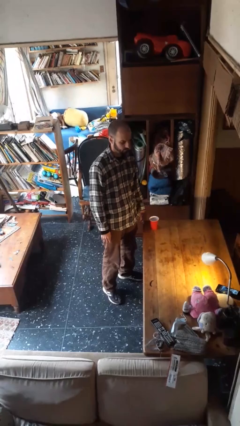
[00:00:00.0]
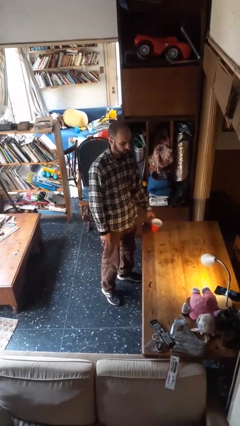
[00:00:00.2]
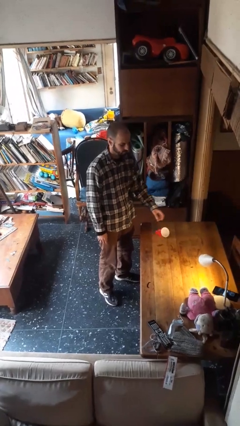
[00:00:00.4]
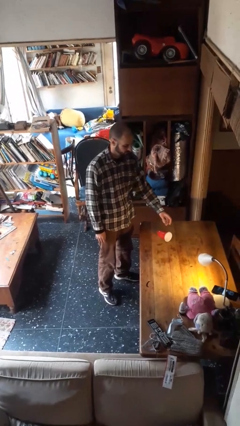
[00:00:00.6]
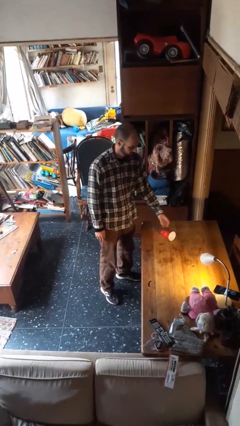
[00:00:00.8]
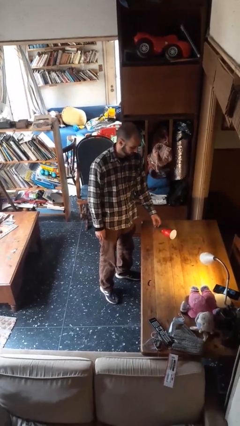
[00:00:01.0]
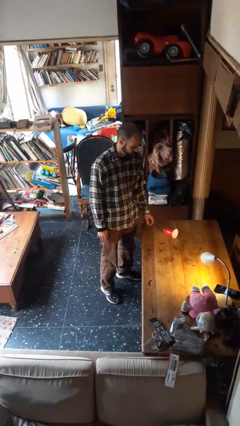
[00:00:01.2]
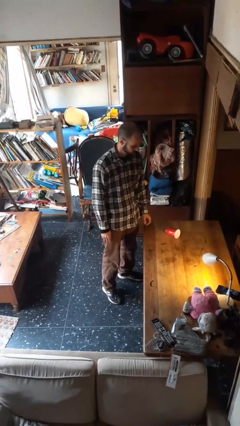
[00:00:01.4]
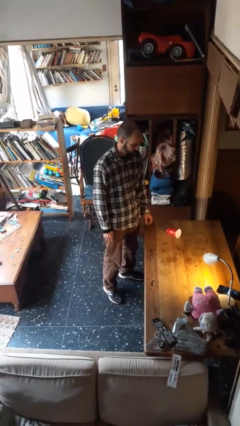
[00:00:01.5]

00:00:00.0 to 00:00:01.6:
person knocks over glass

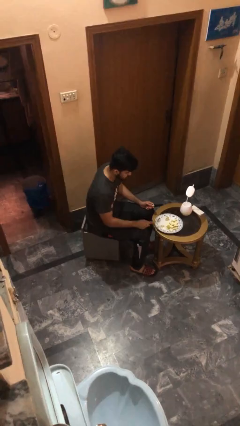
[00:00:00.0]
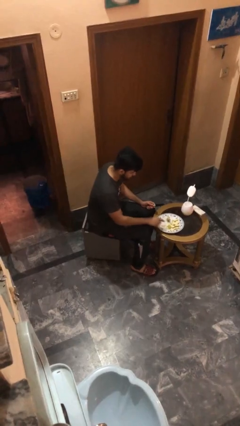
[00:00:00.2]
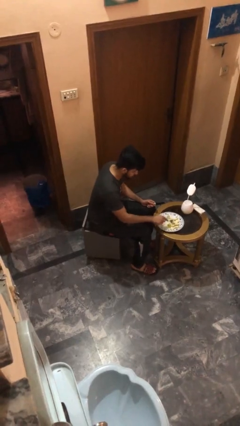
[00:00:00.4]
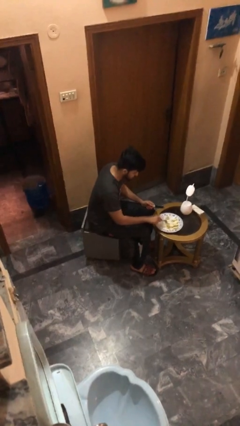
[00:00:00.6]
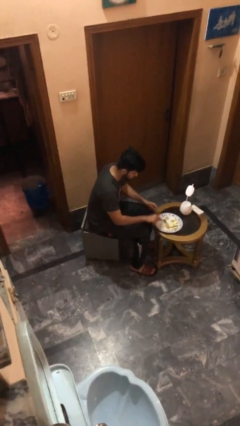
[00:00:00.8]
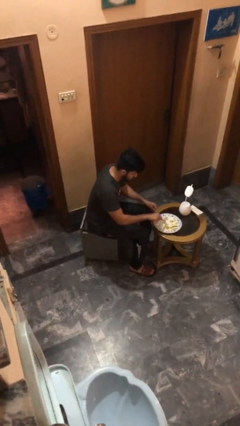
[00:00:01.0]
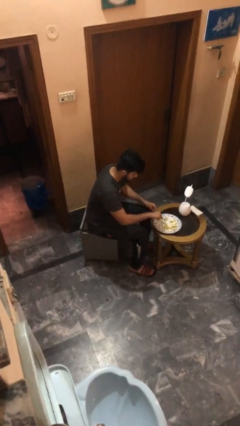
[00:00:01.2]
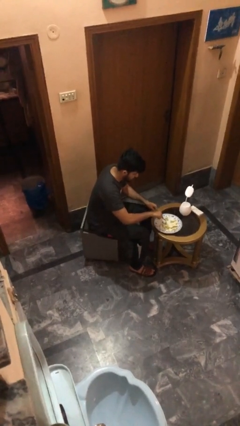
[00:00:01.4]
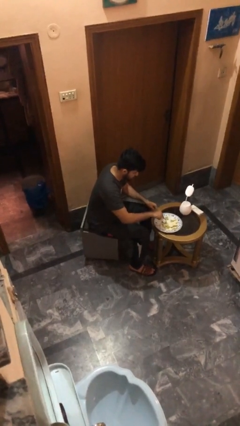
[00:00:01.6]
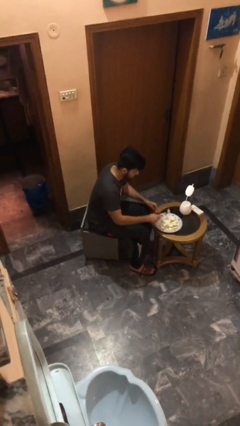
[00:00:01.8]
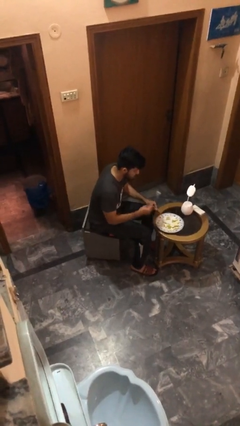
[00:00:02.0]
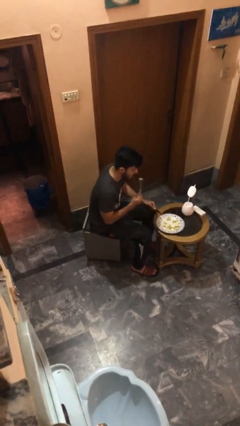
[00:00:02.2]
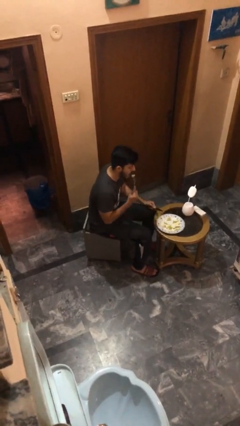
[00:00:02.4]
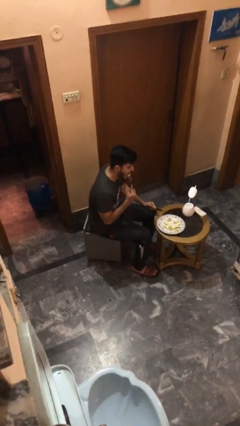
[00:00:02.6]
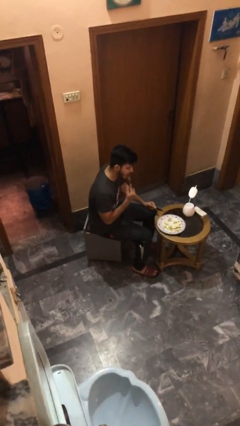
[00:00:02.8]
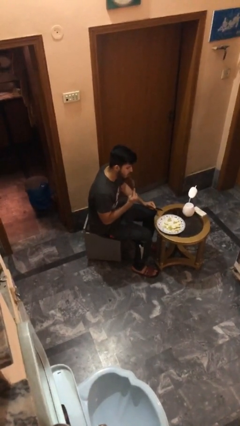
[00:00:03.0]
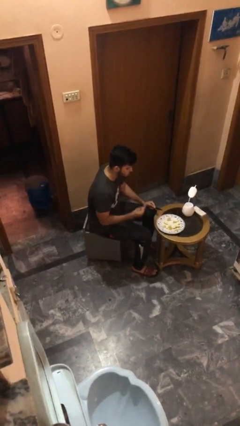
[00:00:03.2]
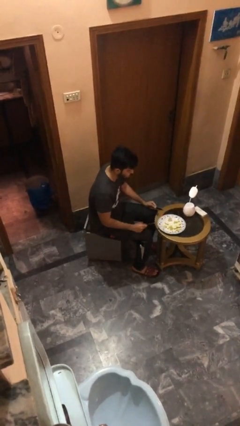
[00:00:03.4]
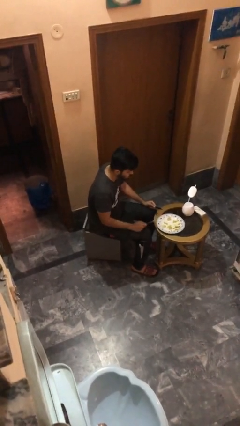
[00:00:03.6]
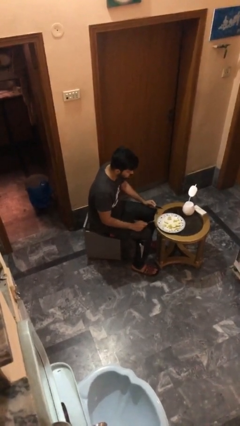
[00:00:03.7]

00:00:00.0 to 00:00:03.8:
person eats with utensil

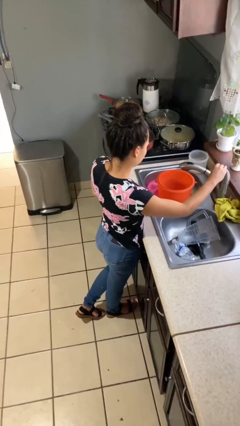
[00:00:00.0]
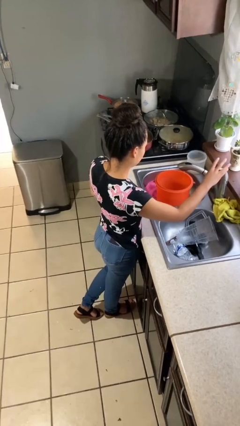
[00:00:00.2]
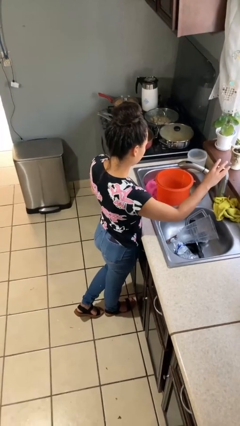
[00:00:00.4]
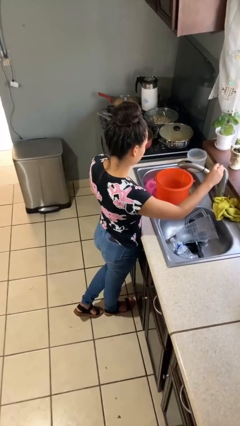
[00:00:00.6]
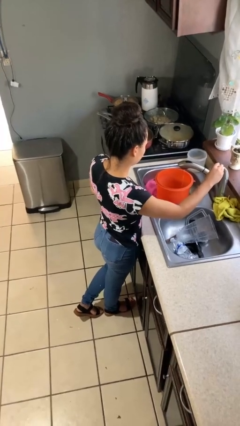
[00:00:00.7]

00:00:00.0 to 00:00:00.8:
person turns on faucet

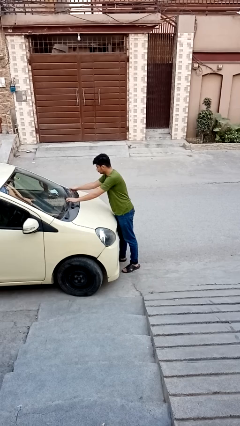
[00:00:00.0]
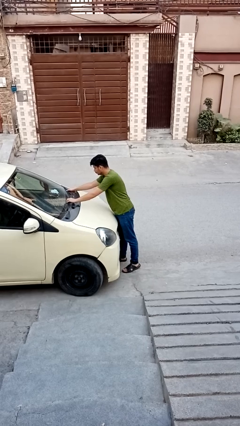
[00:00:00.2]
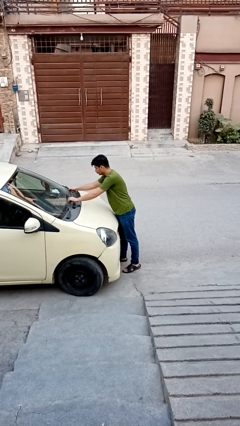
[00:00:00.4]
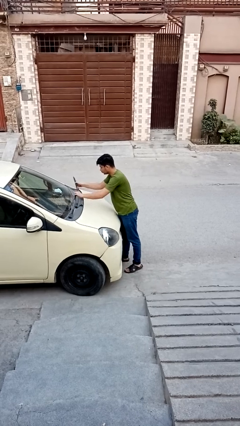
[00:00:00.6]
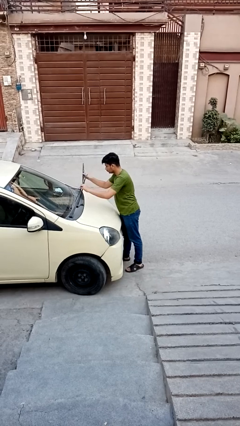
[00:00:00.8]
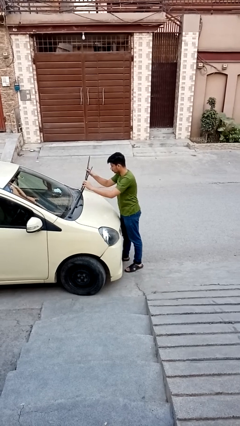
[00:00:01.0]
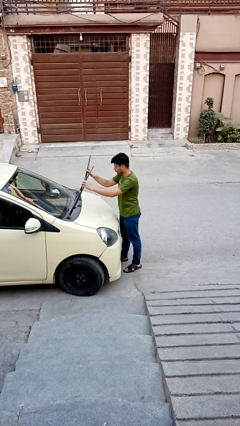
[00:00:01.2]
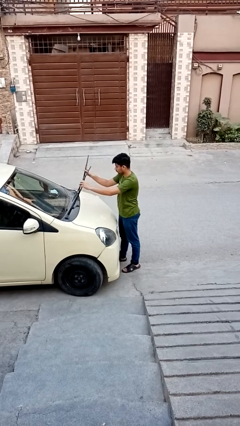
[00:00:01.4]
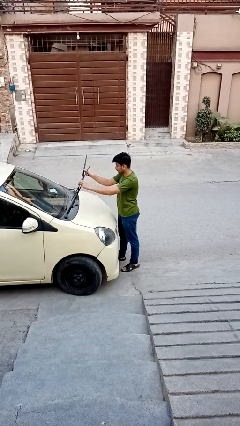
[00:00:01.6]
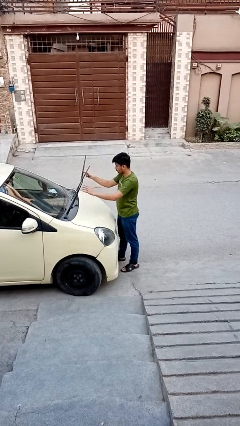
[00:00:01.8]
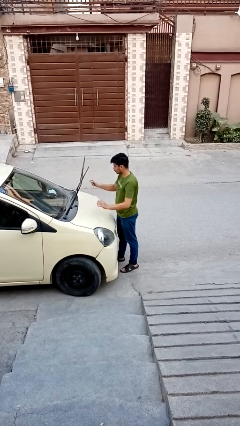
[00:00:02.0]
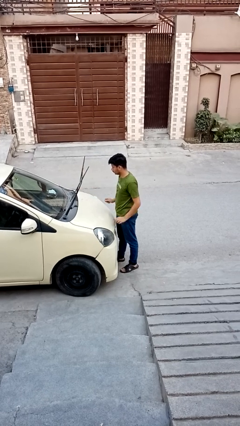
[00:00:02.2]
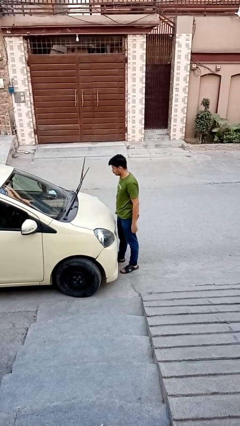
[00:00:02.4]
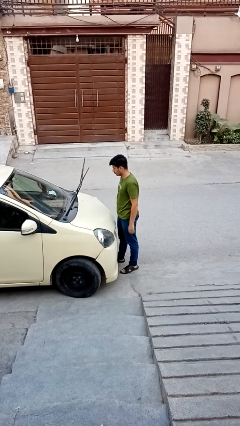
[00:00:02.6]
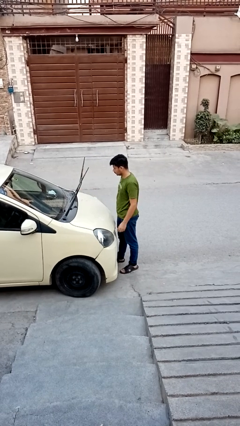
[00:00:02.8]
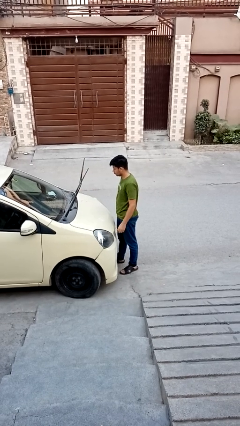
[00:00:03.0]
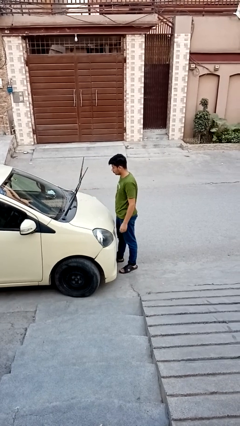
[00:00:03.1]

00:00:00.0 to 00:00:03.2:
person flips up car wipers

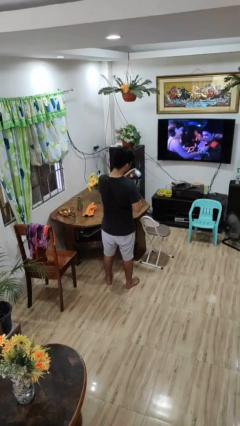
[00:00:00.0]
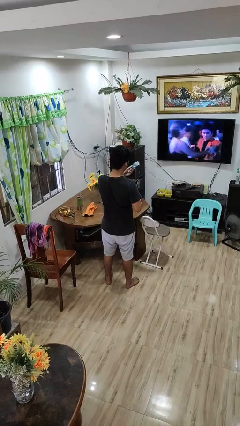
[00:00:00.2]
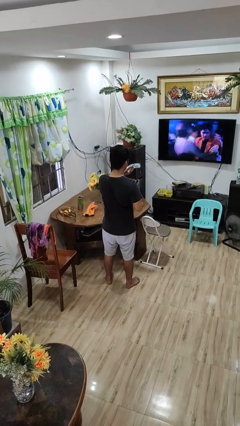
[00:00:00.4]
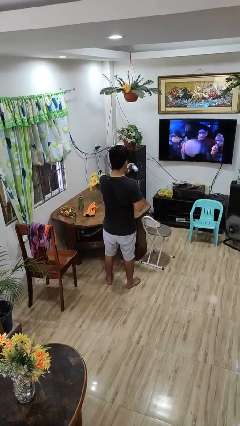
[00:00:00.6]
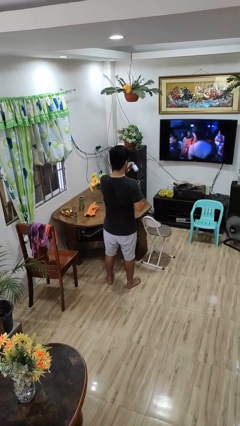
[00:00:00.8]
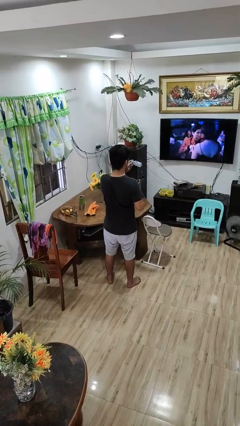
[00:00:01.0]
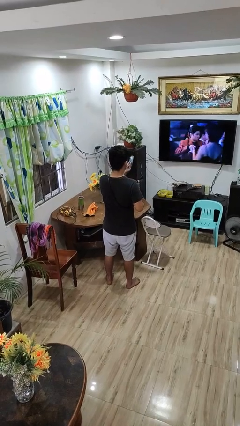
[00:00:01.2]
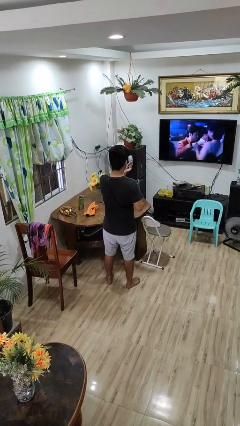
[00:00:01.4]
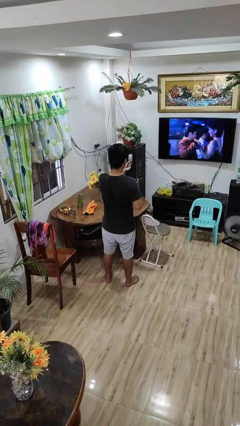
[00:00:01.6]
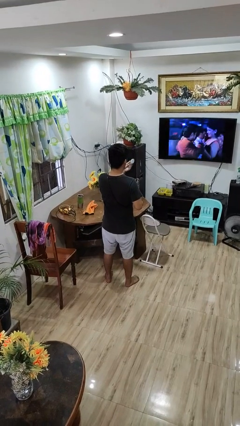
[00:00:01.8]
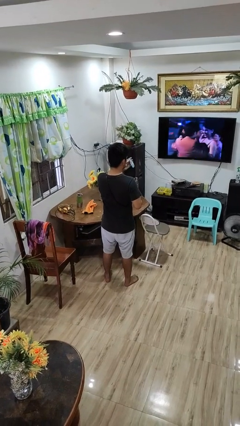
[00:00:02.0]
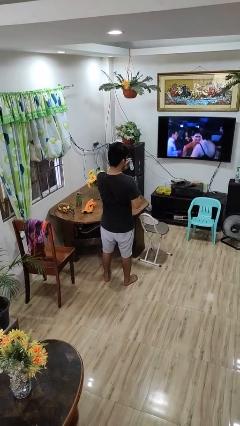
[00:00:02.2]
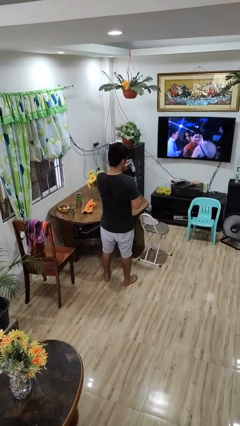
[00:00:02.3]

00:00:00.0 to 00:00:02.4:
person takes object from purse

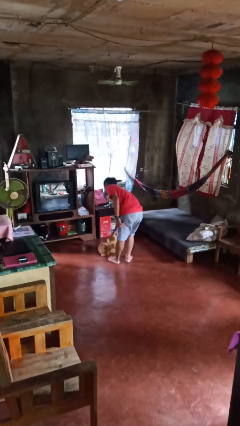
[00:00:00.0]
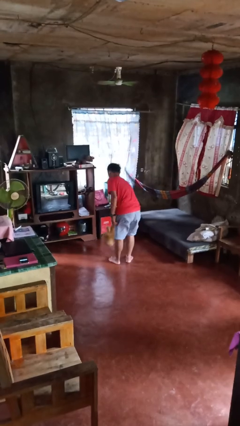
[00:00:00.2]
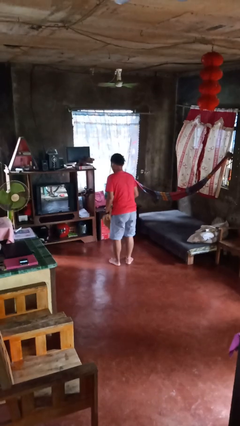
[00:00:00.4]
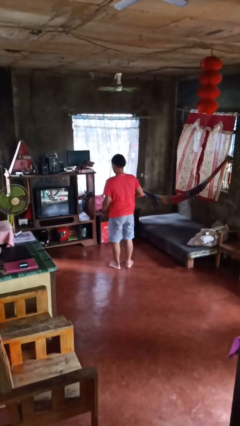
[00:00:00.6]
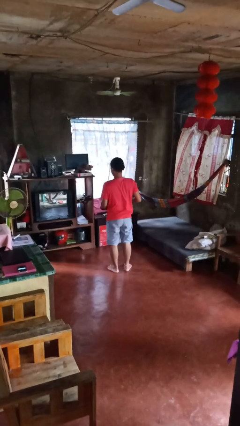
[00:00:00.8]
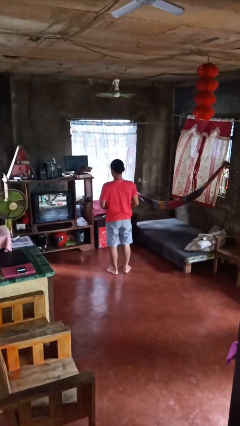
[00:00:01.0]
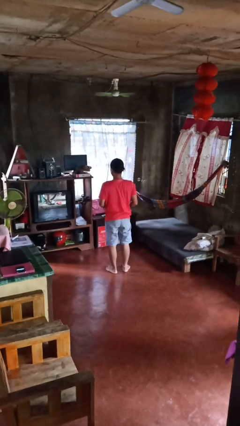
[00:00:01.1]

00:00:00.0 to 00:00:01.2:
person picks up object from floor

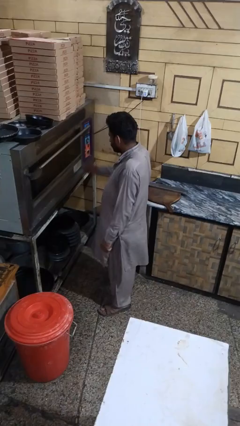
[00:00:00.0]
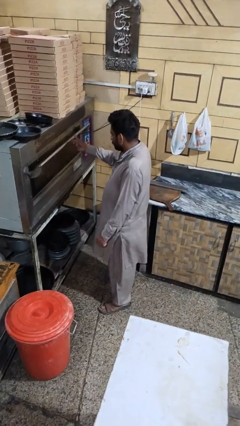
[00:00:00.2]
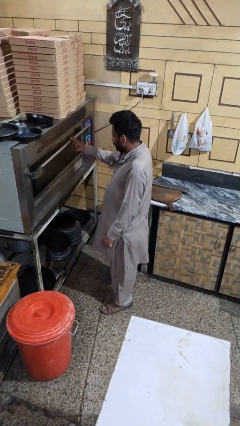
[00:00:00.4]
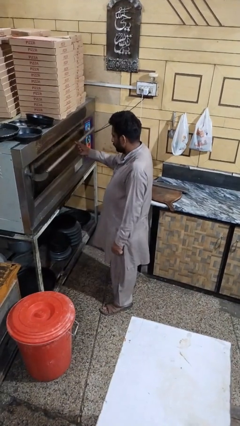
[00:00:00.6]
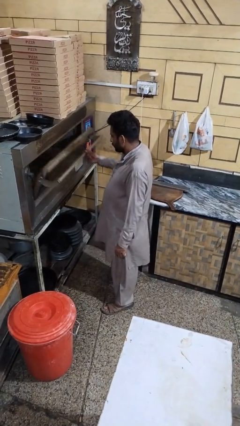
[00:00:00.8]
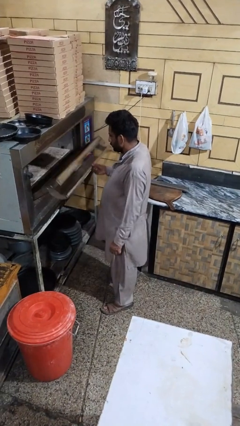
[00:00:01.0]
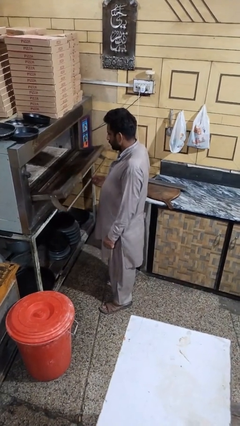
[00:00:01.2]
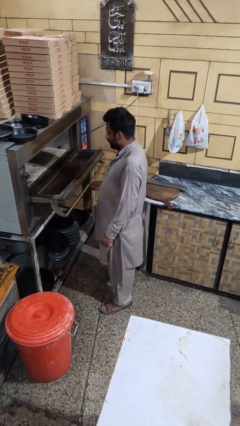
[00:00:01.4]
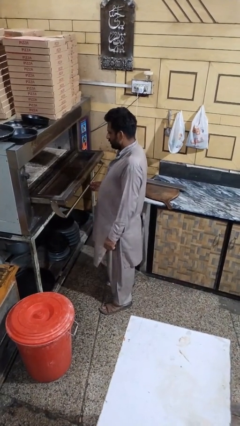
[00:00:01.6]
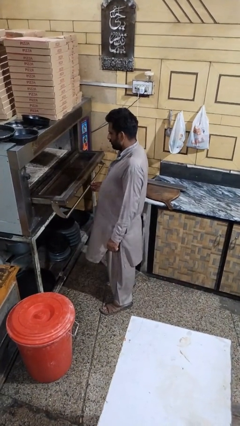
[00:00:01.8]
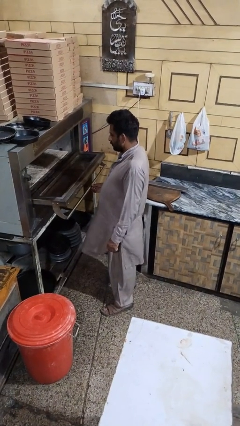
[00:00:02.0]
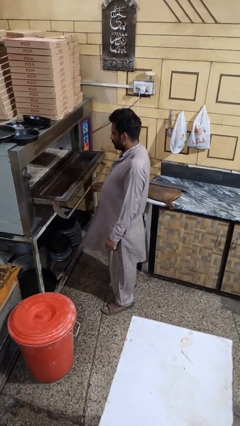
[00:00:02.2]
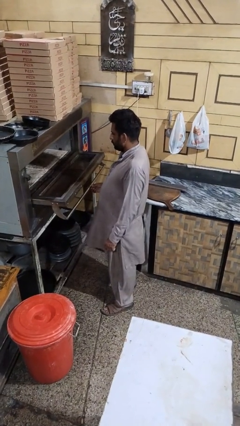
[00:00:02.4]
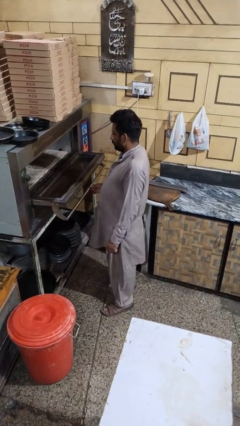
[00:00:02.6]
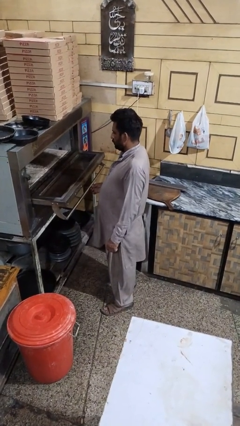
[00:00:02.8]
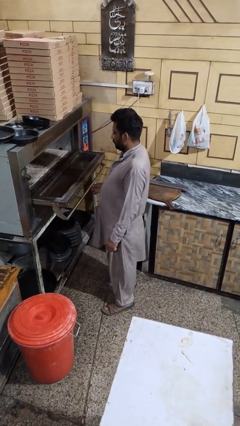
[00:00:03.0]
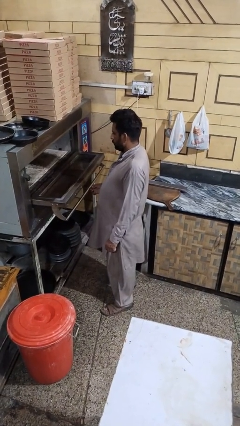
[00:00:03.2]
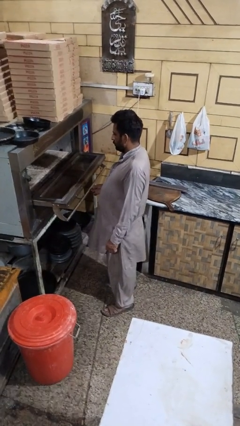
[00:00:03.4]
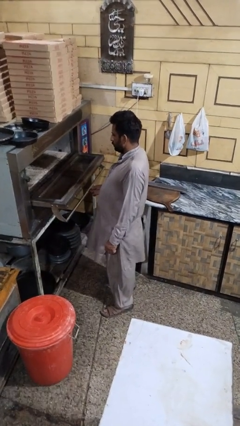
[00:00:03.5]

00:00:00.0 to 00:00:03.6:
person opens microwave

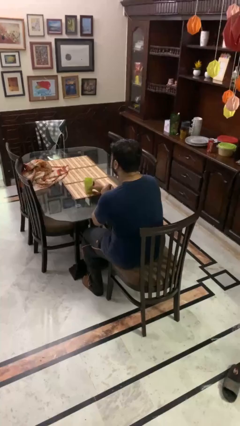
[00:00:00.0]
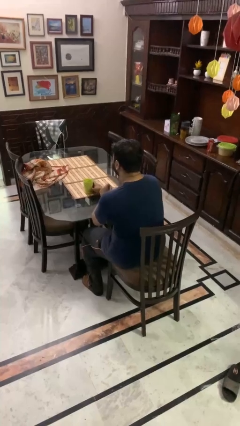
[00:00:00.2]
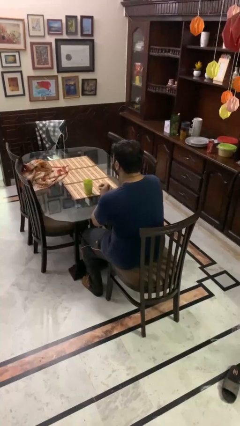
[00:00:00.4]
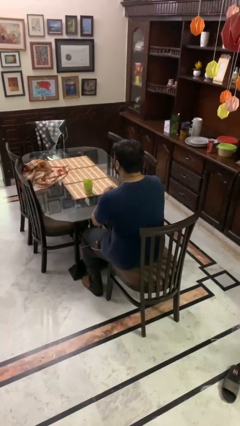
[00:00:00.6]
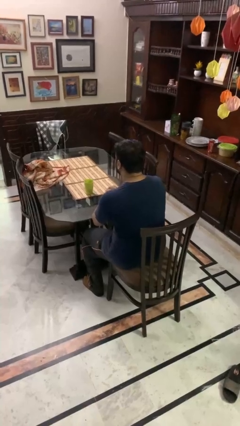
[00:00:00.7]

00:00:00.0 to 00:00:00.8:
person sets upright glass
